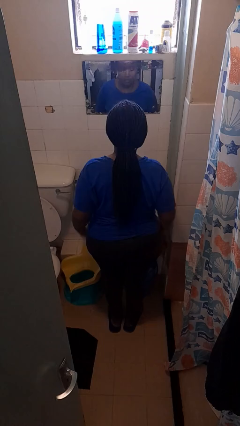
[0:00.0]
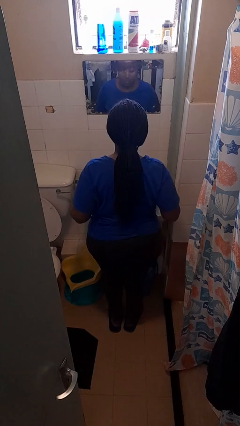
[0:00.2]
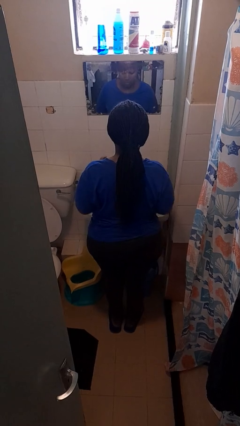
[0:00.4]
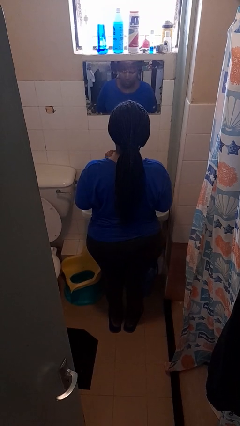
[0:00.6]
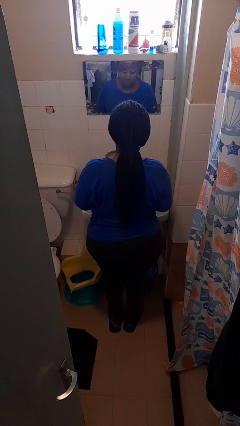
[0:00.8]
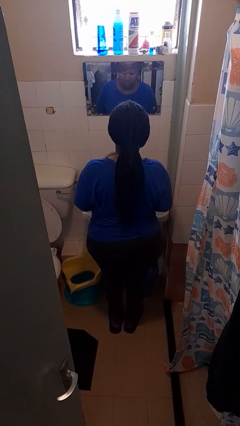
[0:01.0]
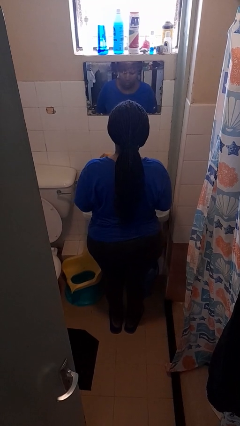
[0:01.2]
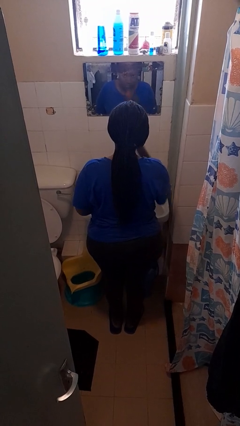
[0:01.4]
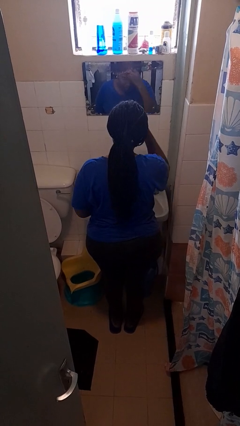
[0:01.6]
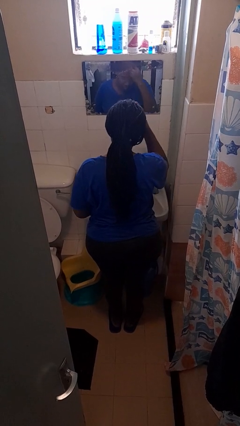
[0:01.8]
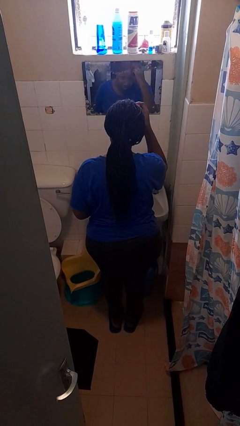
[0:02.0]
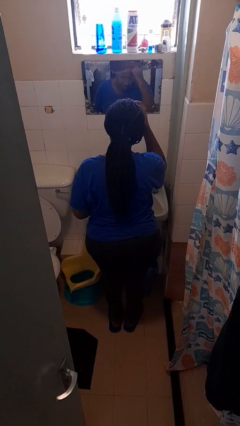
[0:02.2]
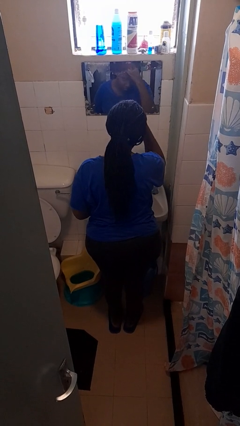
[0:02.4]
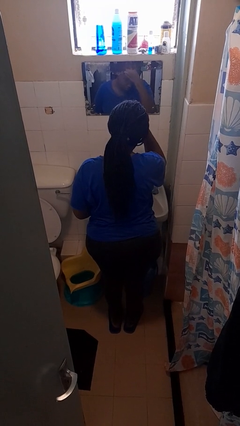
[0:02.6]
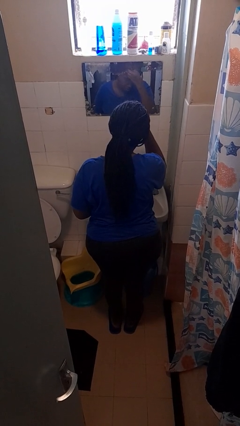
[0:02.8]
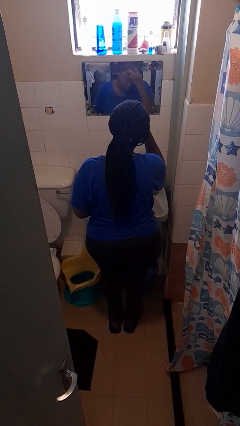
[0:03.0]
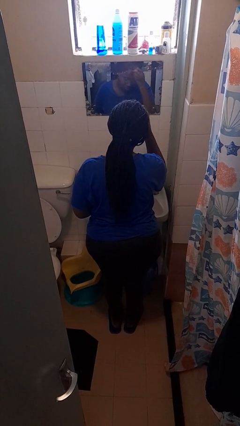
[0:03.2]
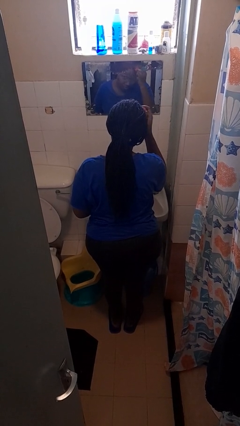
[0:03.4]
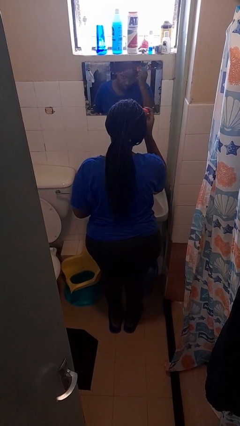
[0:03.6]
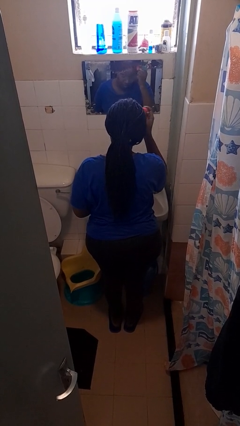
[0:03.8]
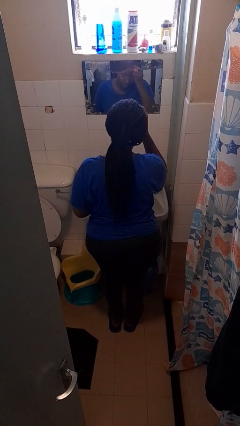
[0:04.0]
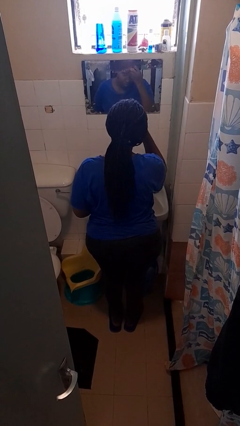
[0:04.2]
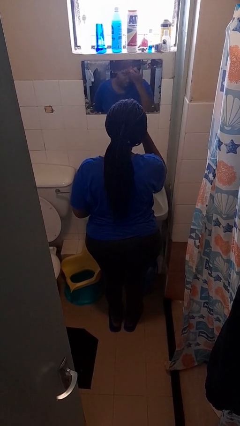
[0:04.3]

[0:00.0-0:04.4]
person applies foundation makeup

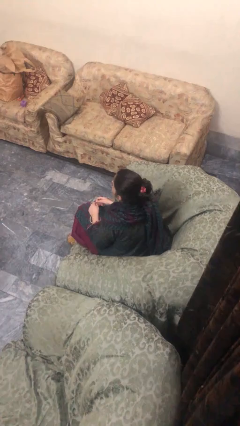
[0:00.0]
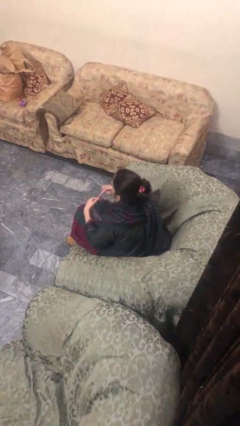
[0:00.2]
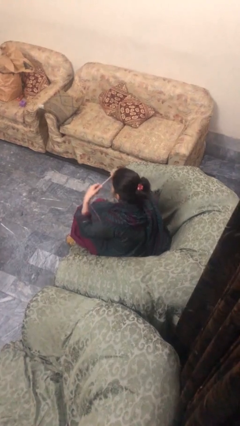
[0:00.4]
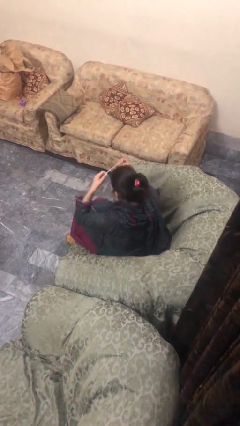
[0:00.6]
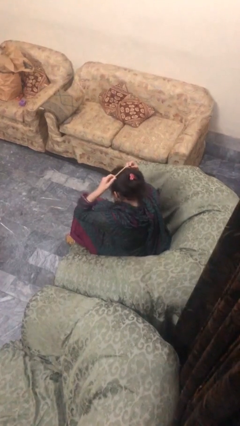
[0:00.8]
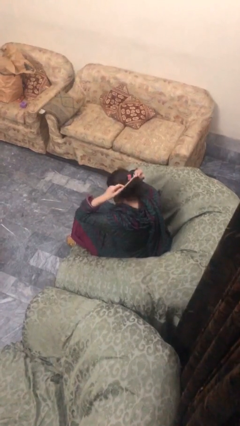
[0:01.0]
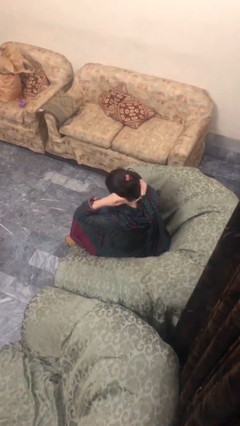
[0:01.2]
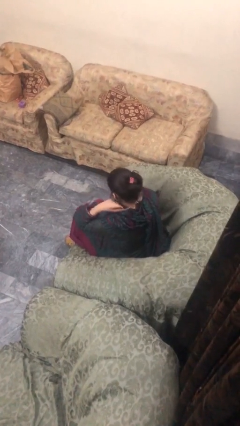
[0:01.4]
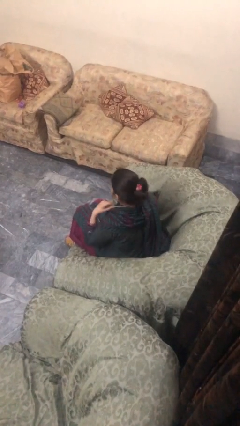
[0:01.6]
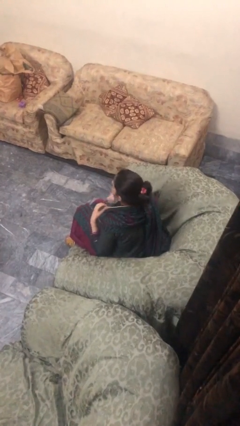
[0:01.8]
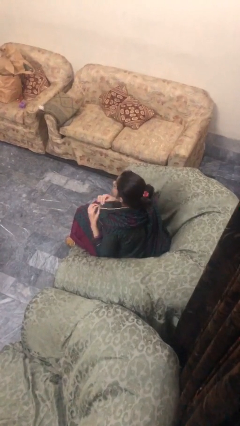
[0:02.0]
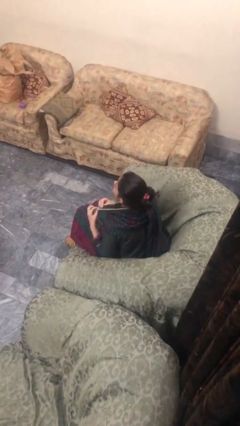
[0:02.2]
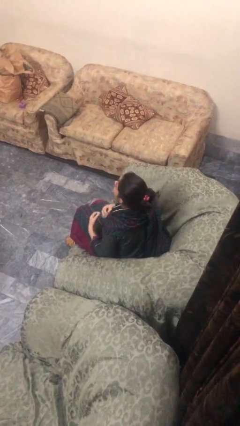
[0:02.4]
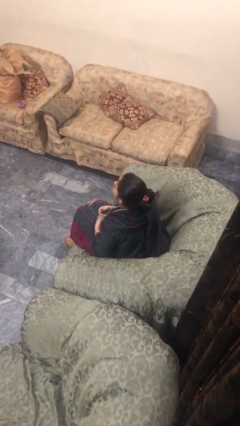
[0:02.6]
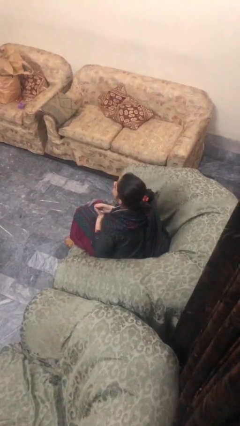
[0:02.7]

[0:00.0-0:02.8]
person puts on necklace

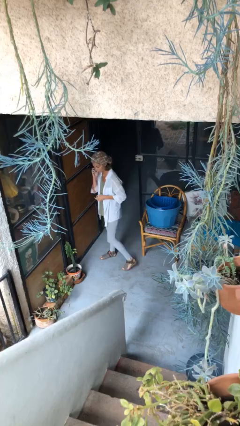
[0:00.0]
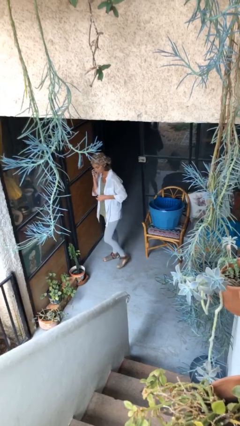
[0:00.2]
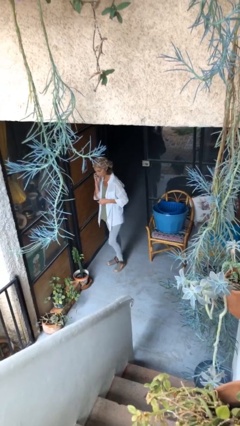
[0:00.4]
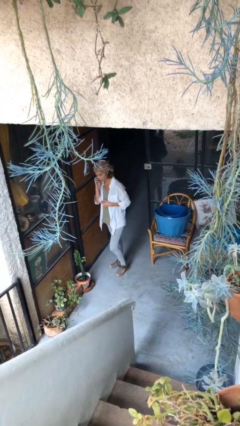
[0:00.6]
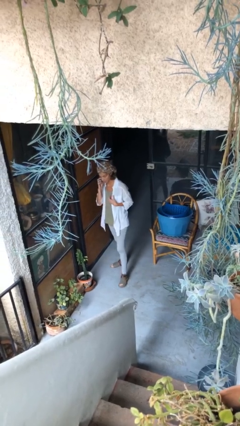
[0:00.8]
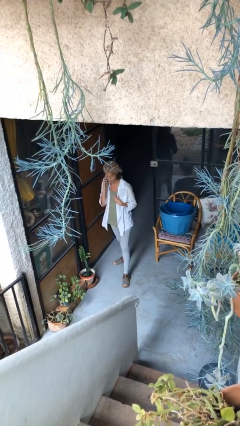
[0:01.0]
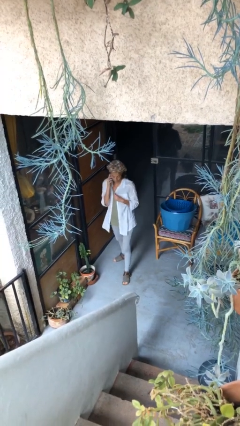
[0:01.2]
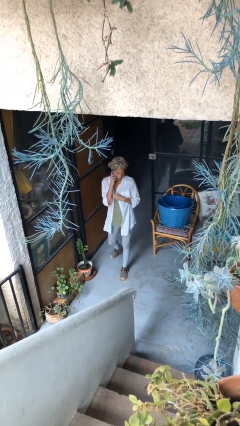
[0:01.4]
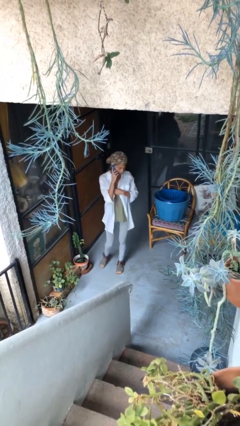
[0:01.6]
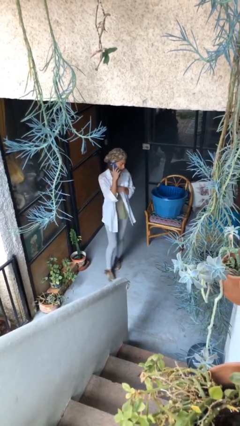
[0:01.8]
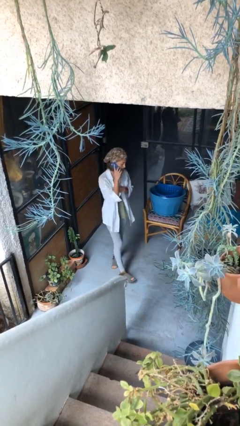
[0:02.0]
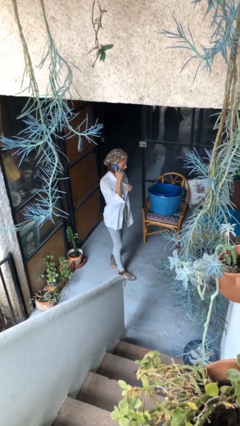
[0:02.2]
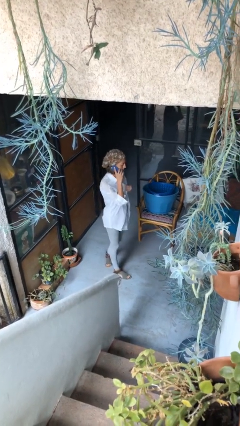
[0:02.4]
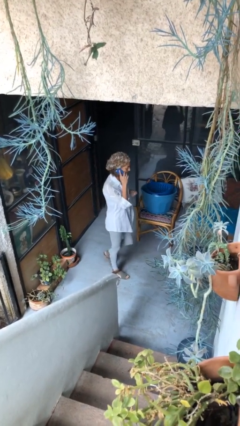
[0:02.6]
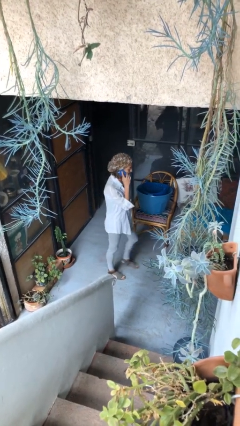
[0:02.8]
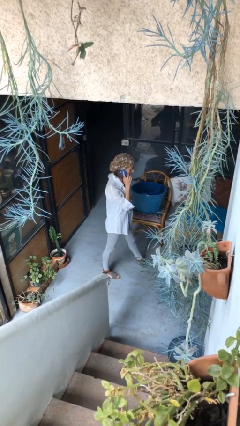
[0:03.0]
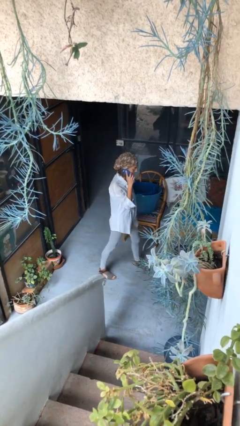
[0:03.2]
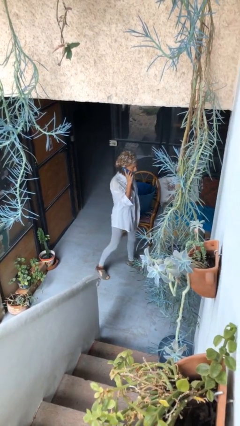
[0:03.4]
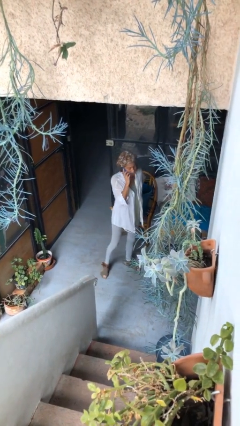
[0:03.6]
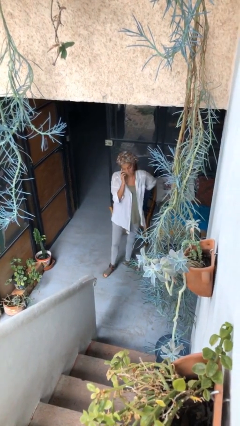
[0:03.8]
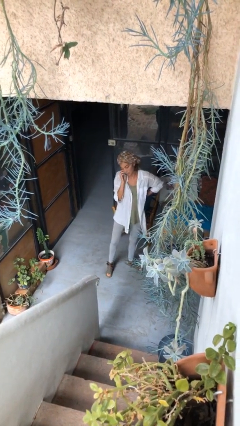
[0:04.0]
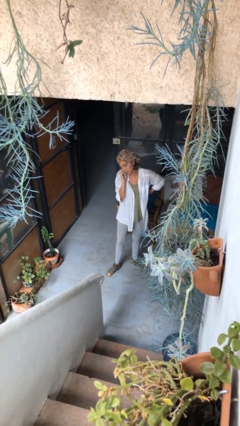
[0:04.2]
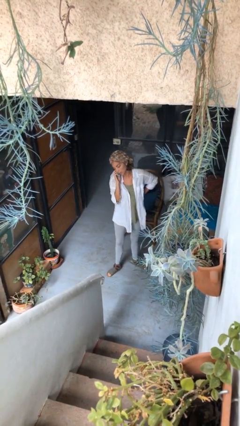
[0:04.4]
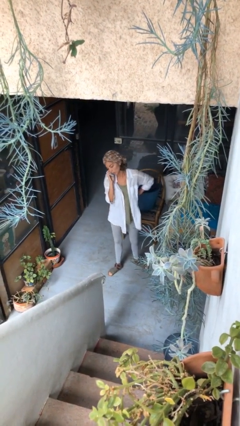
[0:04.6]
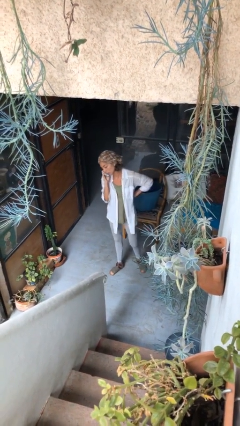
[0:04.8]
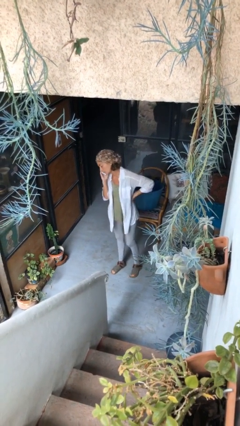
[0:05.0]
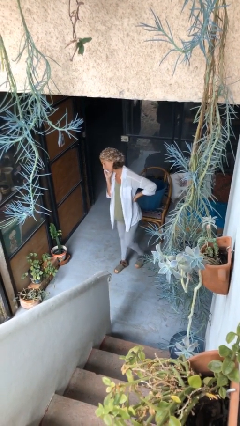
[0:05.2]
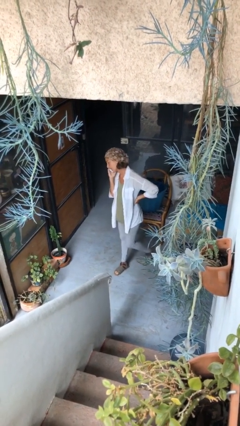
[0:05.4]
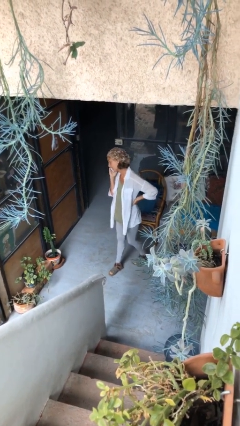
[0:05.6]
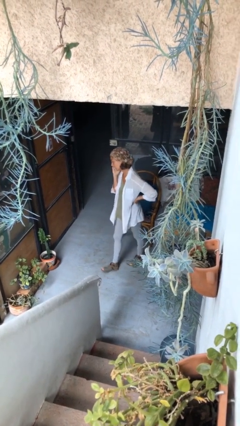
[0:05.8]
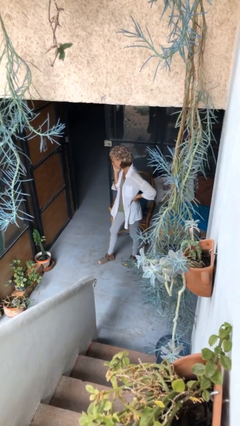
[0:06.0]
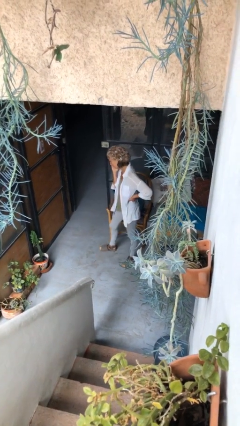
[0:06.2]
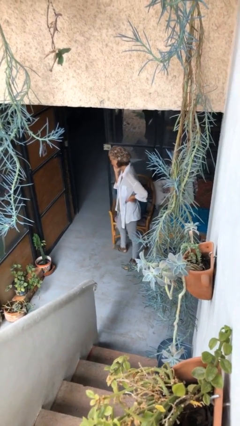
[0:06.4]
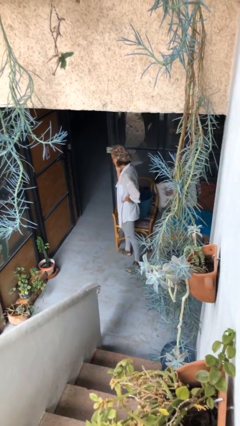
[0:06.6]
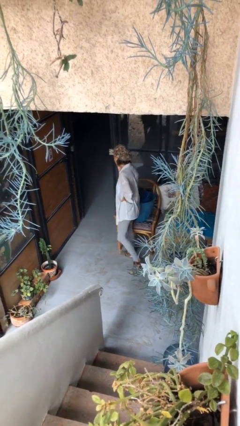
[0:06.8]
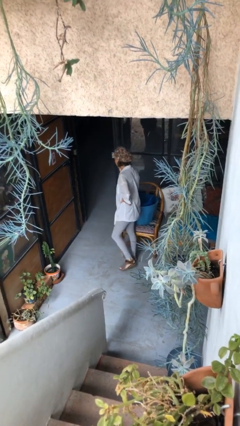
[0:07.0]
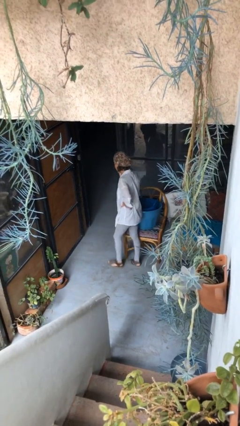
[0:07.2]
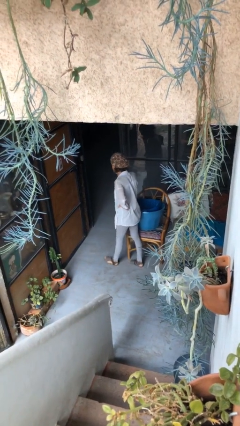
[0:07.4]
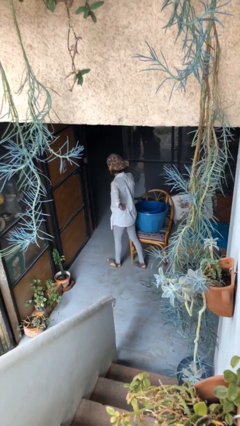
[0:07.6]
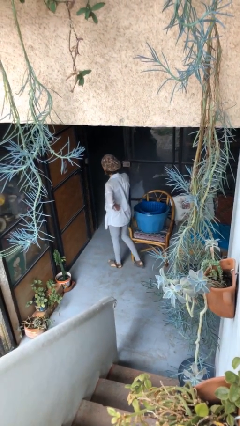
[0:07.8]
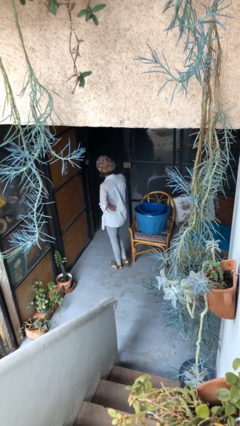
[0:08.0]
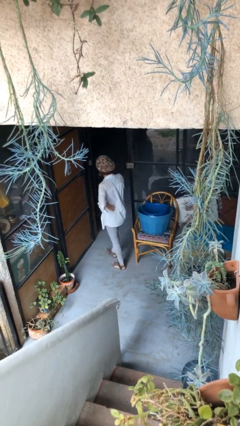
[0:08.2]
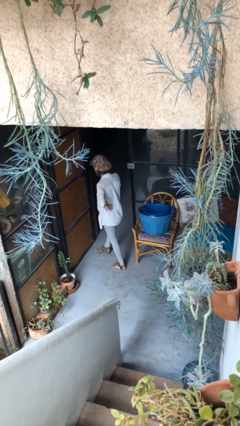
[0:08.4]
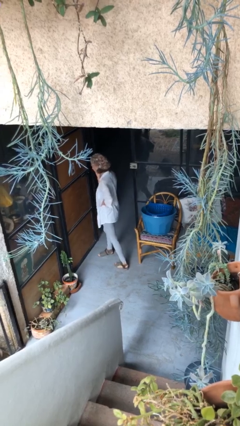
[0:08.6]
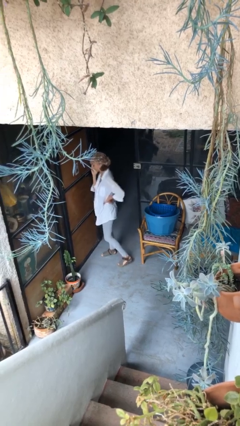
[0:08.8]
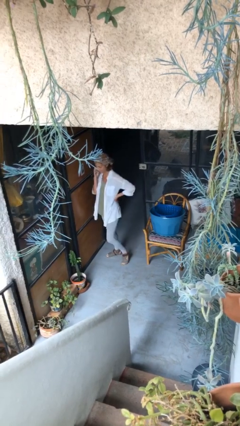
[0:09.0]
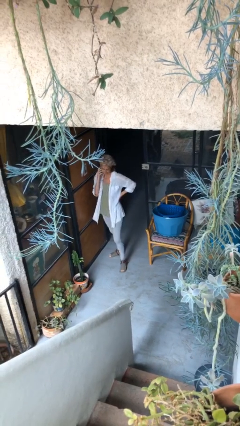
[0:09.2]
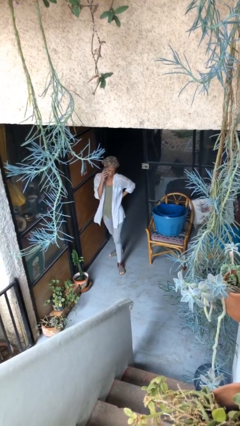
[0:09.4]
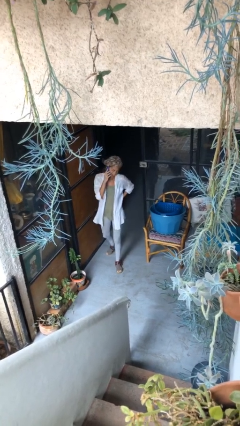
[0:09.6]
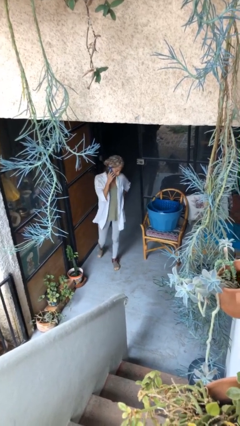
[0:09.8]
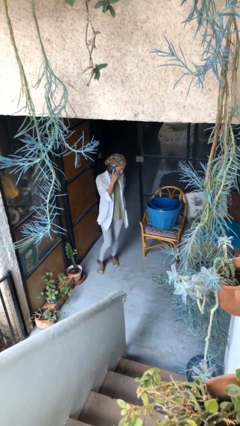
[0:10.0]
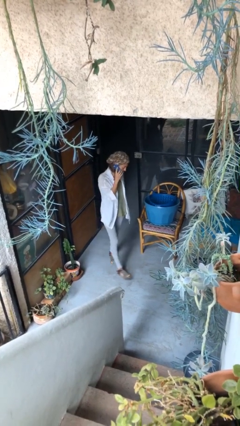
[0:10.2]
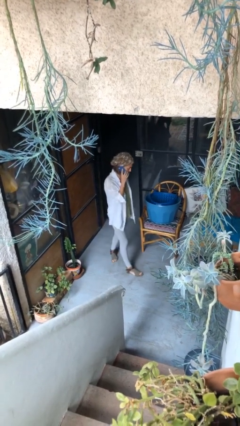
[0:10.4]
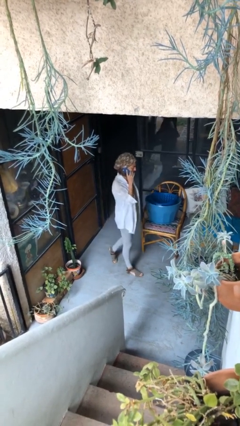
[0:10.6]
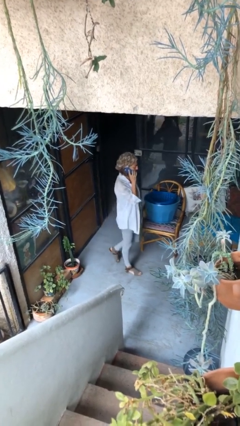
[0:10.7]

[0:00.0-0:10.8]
person talks on phone
